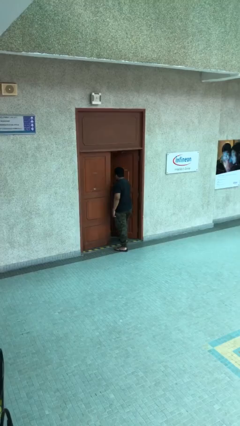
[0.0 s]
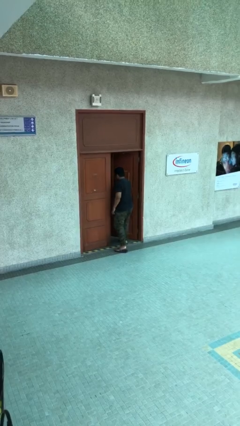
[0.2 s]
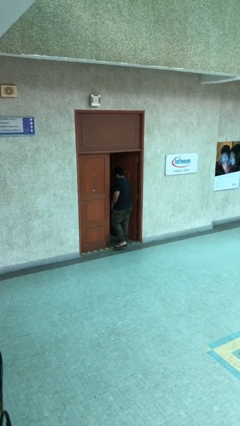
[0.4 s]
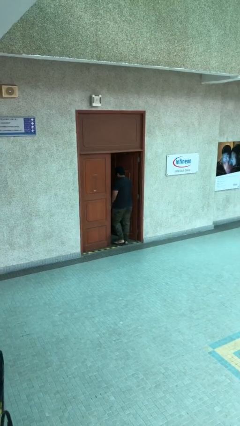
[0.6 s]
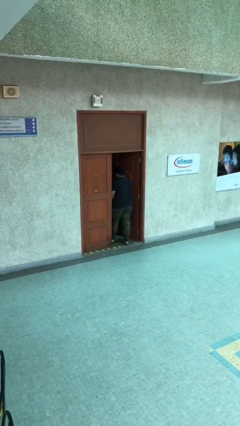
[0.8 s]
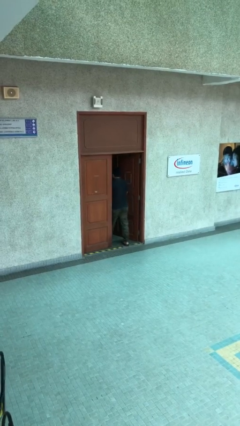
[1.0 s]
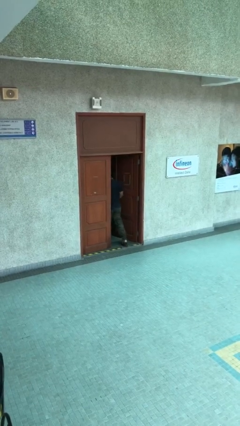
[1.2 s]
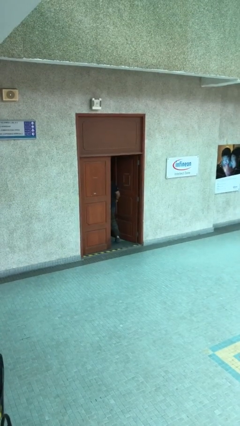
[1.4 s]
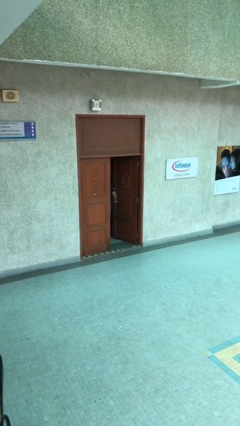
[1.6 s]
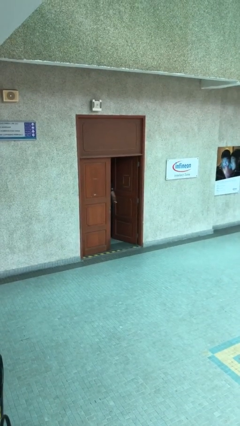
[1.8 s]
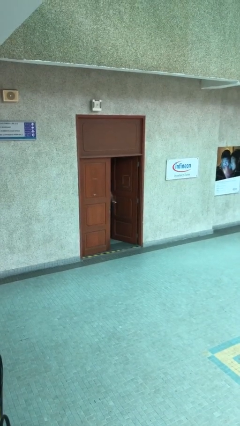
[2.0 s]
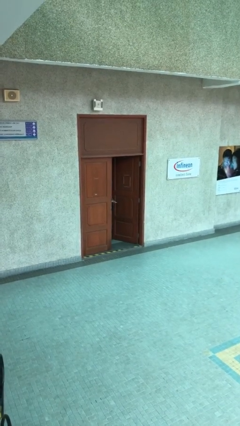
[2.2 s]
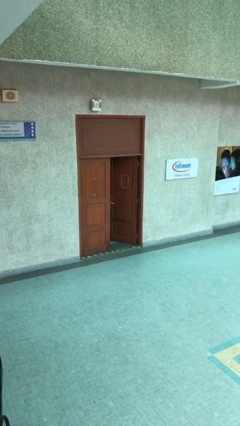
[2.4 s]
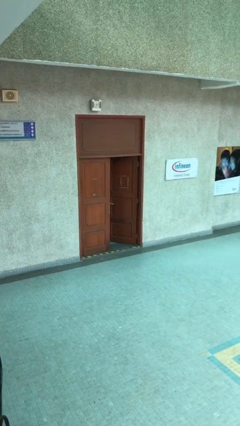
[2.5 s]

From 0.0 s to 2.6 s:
person exits scene through structure

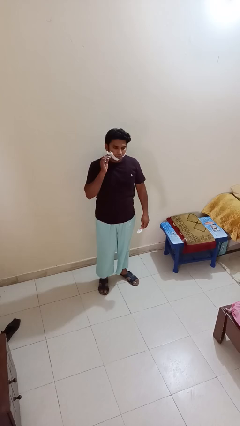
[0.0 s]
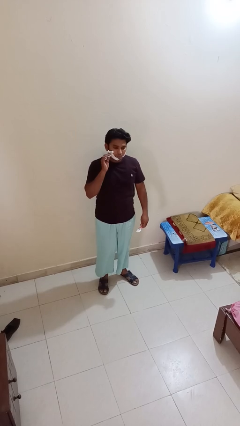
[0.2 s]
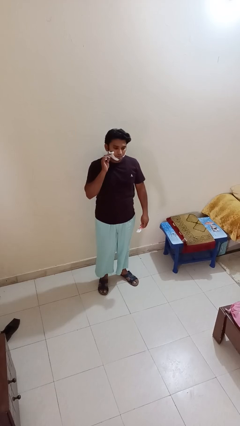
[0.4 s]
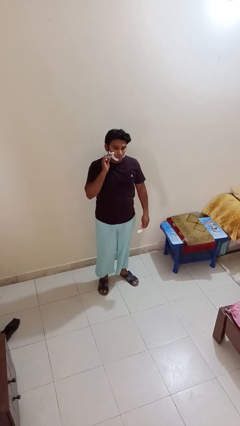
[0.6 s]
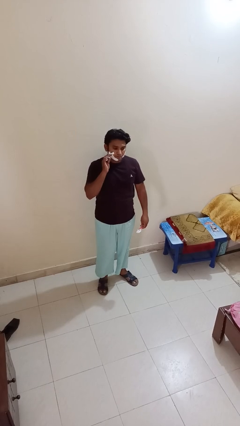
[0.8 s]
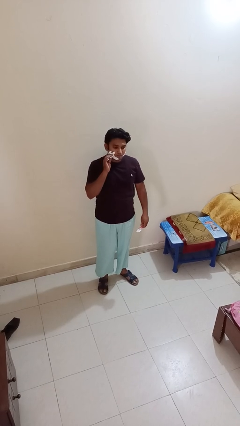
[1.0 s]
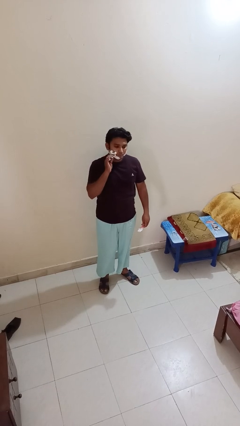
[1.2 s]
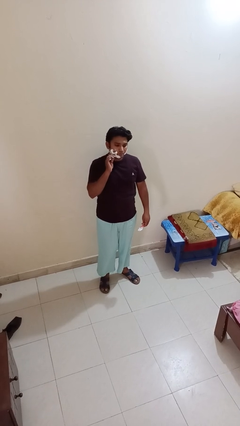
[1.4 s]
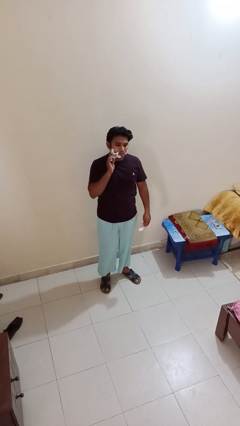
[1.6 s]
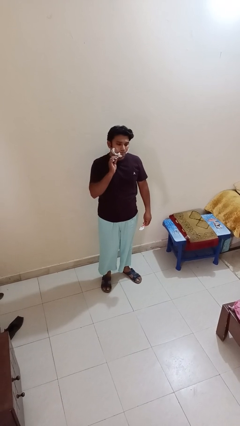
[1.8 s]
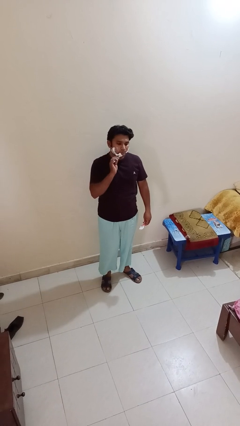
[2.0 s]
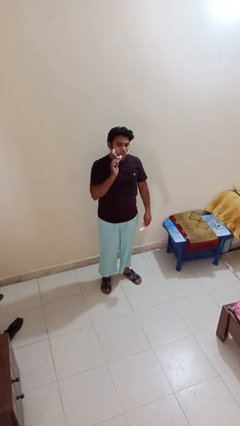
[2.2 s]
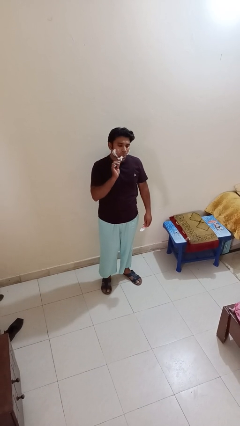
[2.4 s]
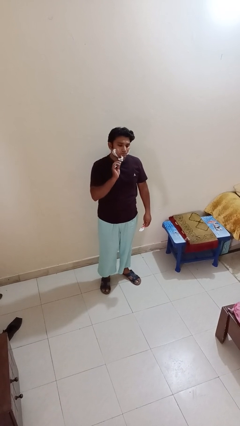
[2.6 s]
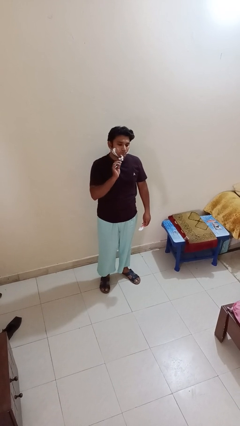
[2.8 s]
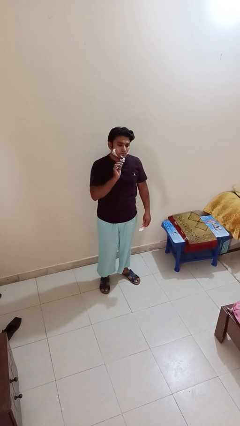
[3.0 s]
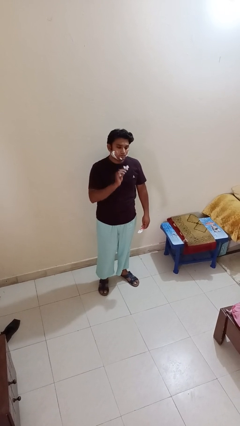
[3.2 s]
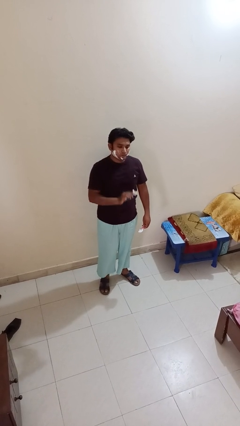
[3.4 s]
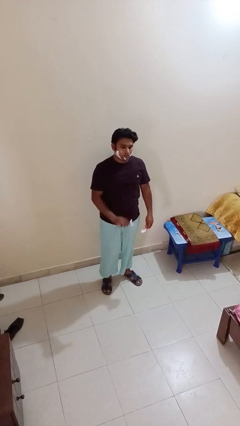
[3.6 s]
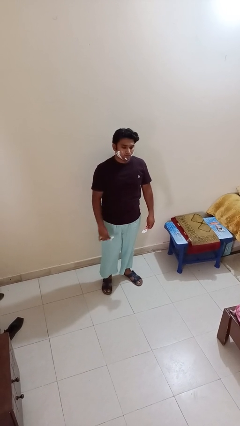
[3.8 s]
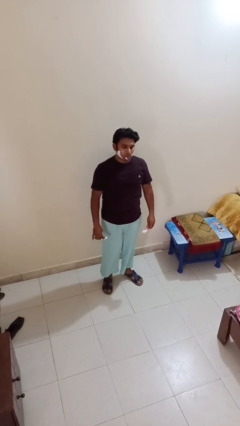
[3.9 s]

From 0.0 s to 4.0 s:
person shaves face

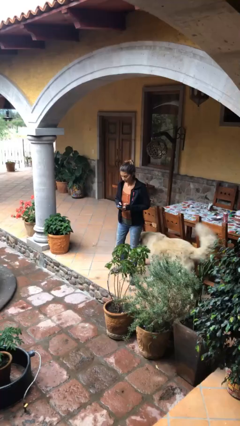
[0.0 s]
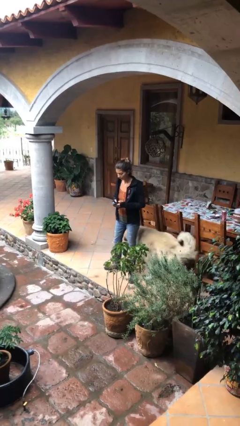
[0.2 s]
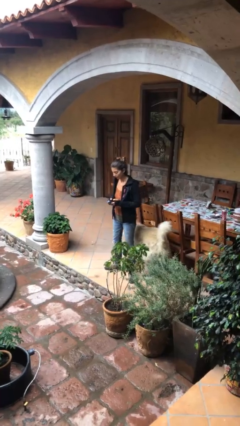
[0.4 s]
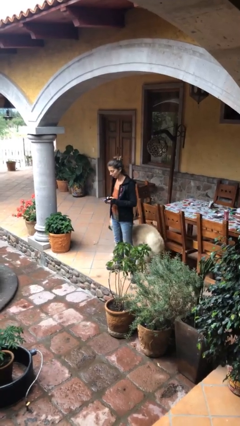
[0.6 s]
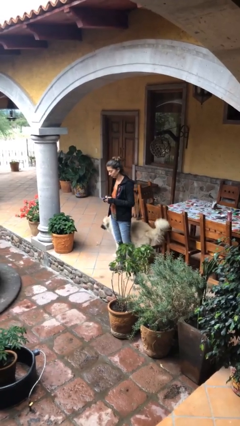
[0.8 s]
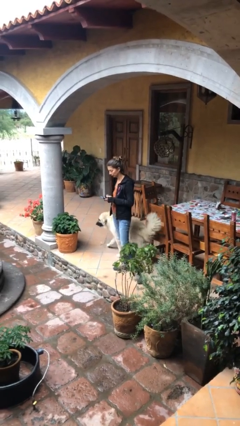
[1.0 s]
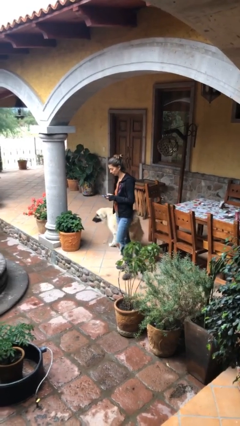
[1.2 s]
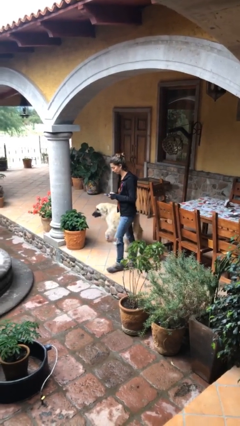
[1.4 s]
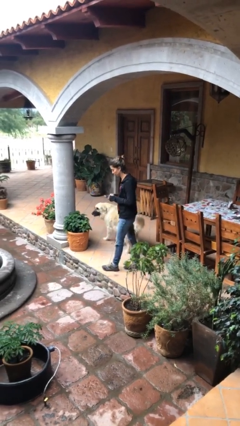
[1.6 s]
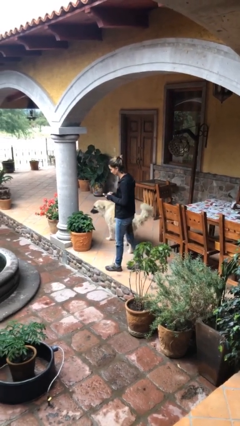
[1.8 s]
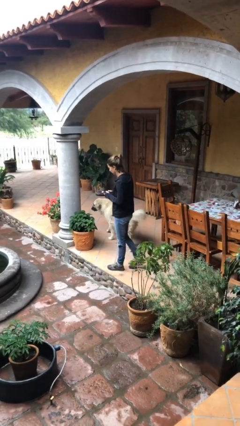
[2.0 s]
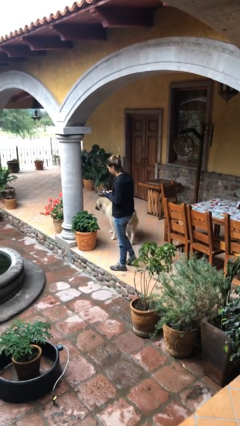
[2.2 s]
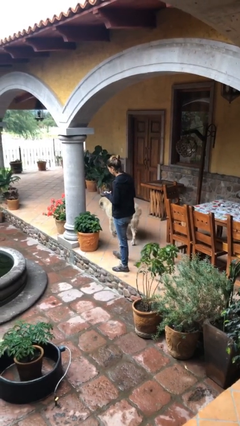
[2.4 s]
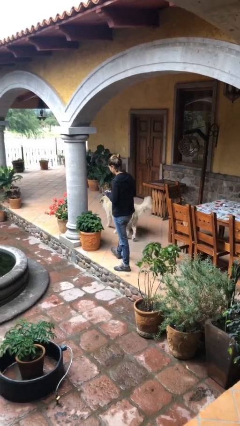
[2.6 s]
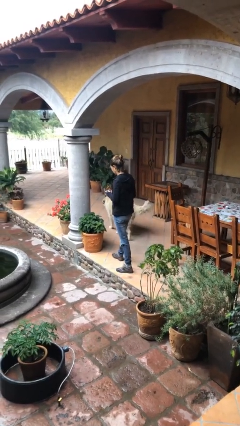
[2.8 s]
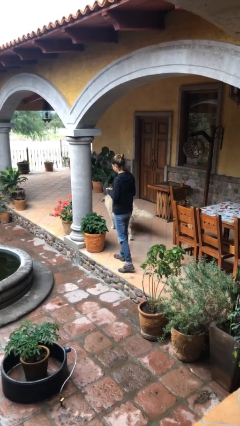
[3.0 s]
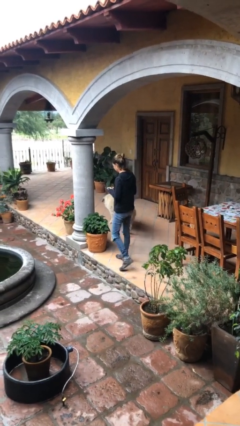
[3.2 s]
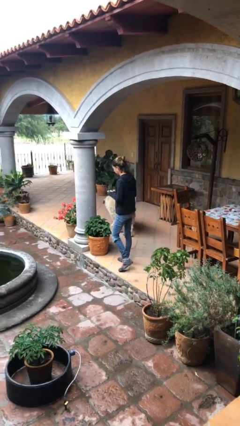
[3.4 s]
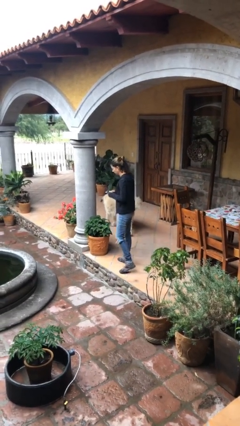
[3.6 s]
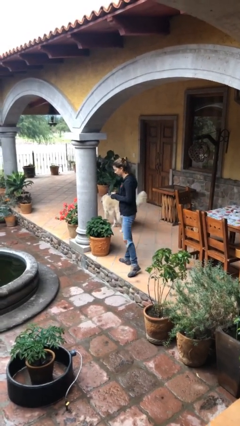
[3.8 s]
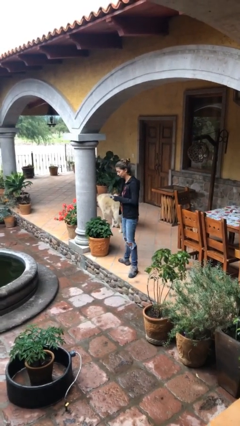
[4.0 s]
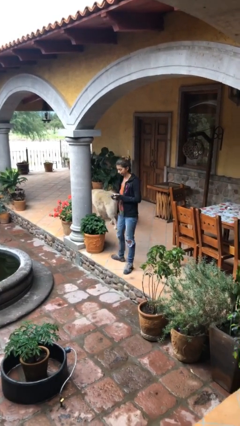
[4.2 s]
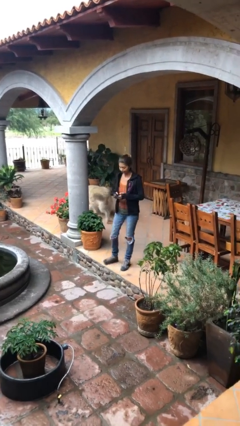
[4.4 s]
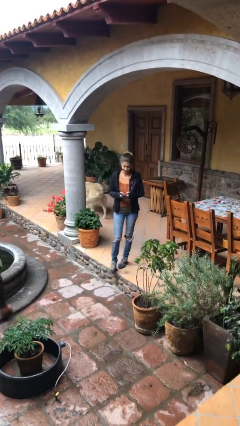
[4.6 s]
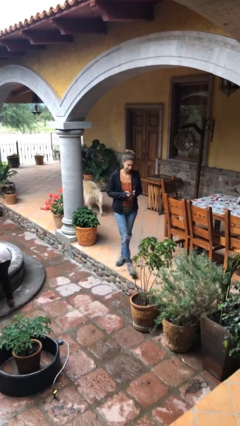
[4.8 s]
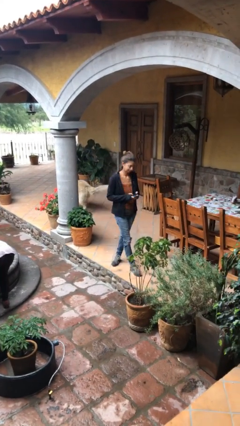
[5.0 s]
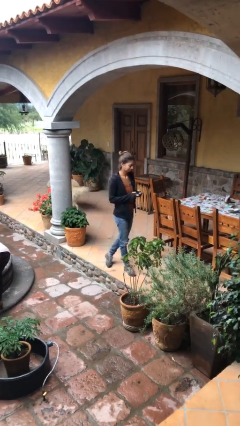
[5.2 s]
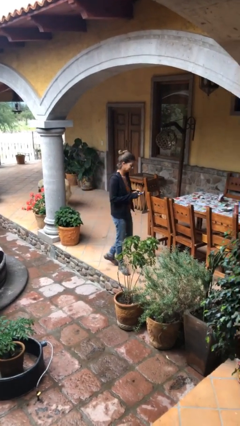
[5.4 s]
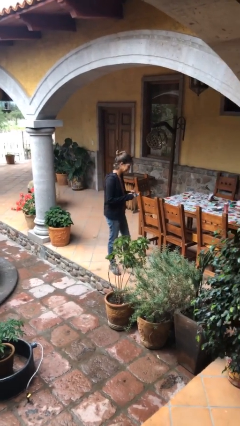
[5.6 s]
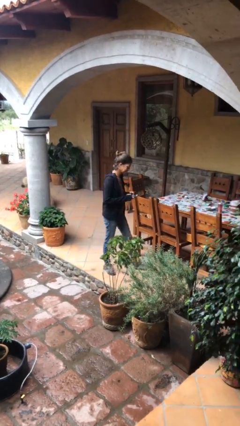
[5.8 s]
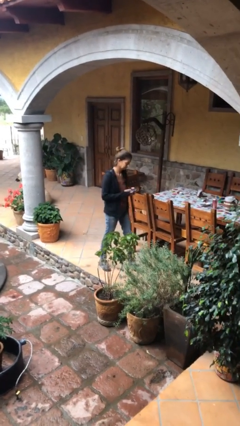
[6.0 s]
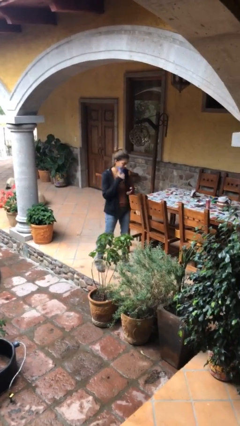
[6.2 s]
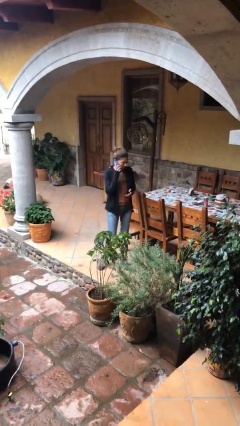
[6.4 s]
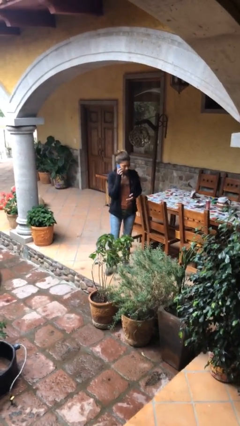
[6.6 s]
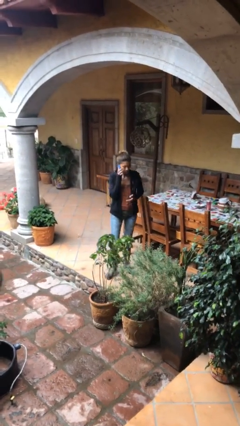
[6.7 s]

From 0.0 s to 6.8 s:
person texts on phone

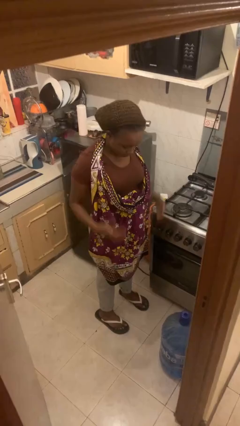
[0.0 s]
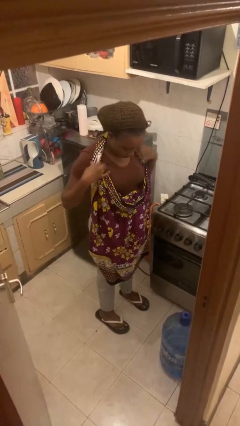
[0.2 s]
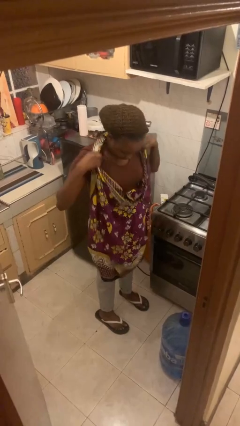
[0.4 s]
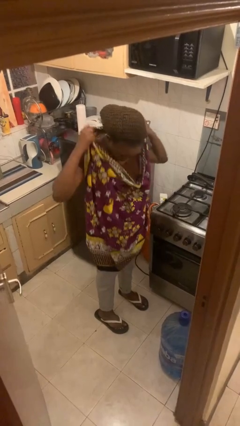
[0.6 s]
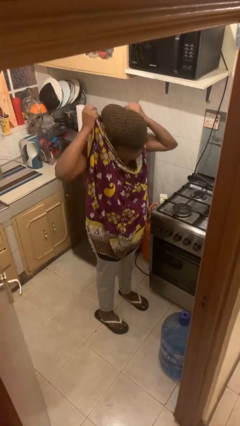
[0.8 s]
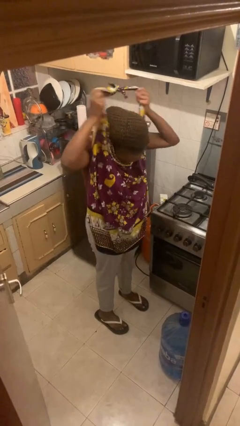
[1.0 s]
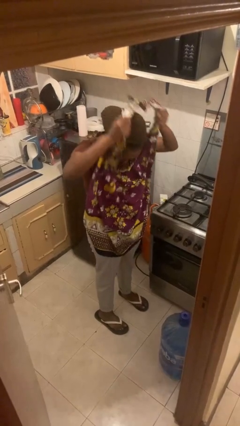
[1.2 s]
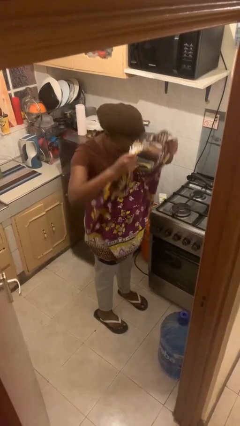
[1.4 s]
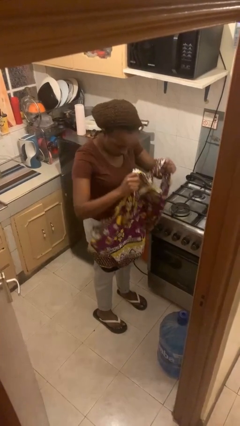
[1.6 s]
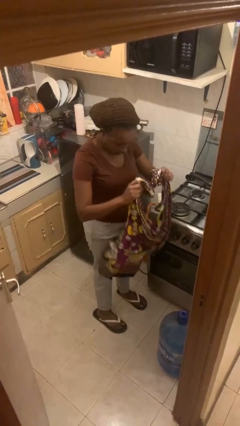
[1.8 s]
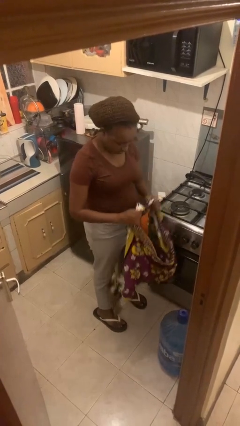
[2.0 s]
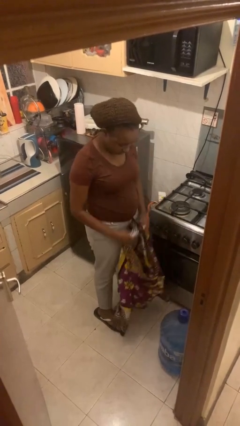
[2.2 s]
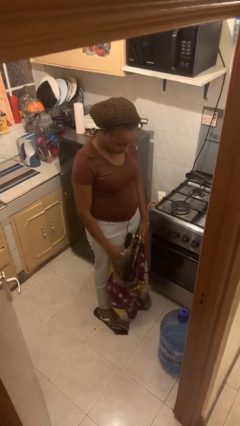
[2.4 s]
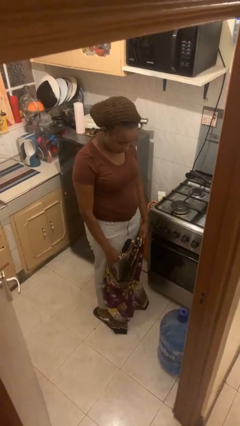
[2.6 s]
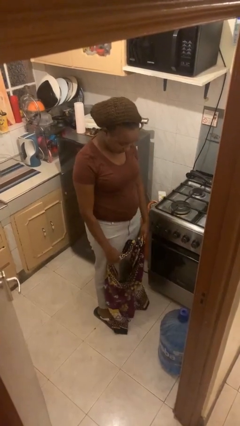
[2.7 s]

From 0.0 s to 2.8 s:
person takes off apron

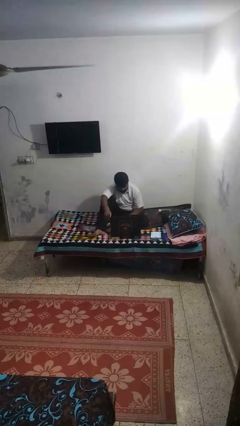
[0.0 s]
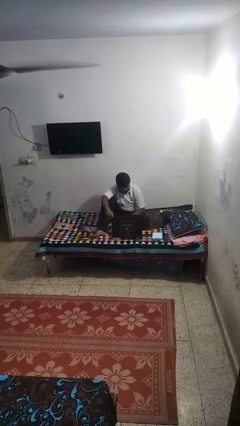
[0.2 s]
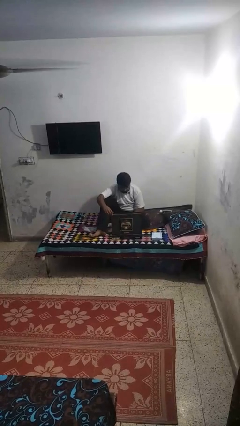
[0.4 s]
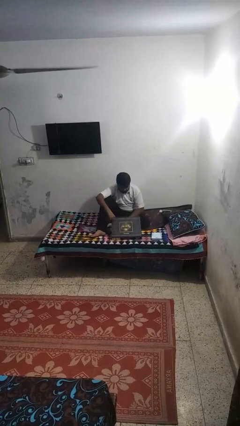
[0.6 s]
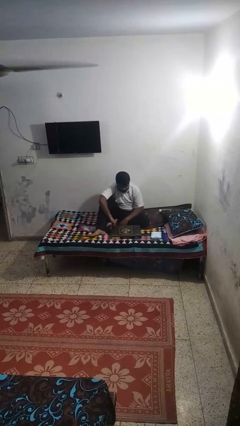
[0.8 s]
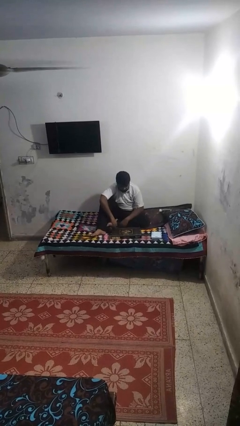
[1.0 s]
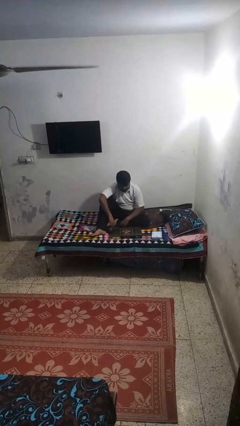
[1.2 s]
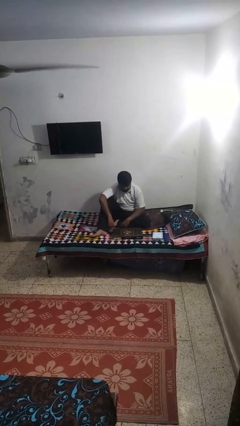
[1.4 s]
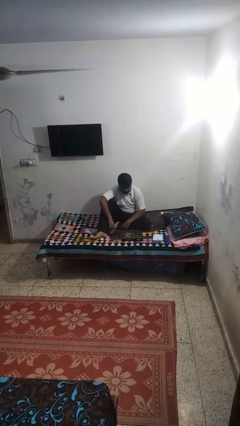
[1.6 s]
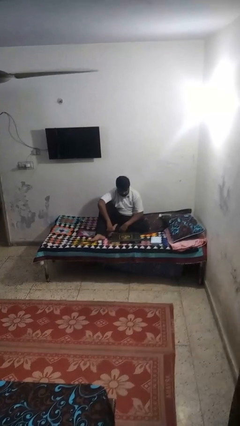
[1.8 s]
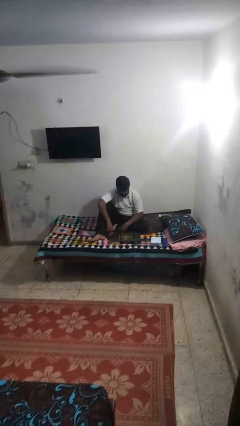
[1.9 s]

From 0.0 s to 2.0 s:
person closes laptop
